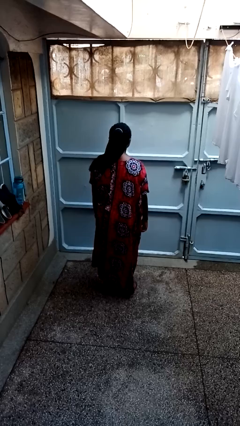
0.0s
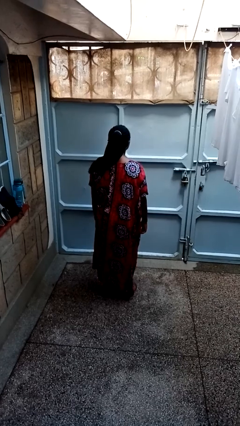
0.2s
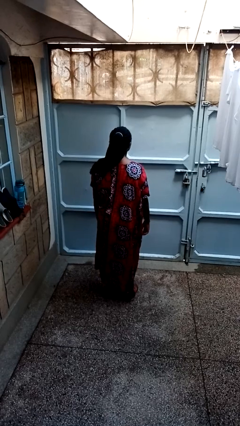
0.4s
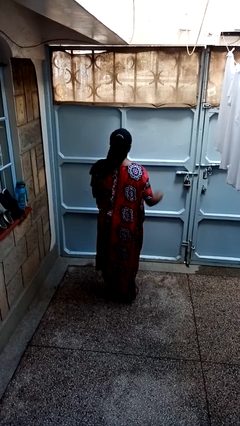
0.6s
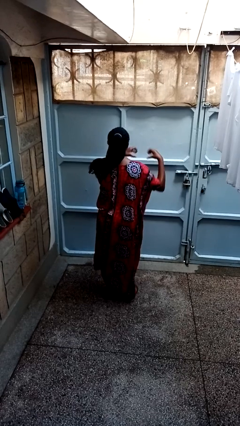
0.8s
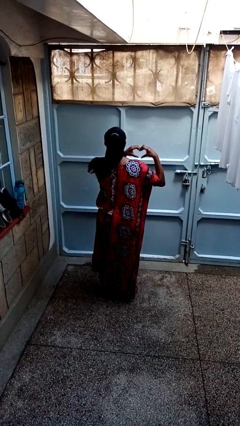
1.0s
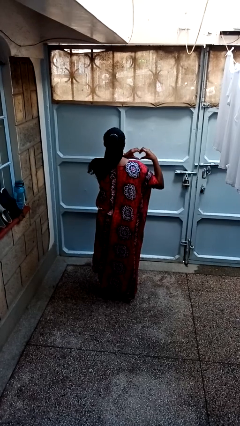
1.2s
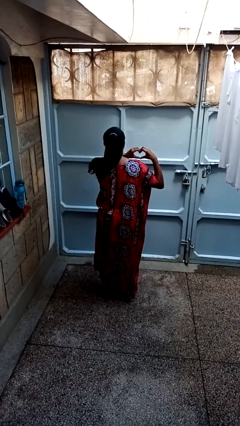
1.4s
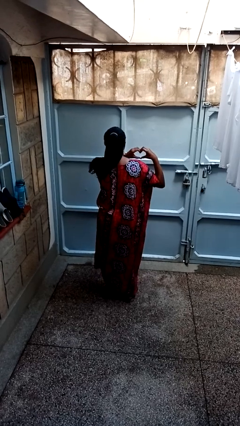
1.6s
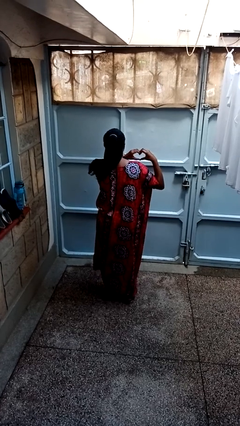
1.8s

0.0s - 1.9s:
person gestures heart

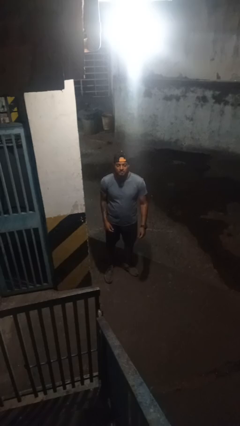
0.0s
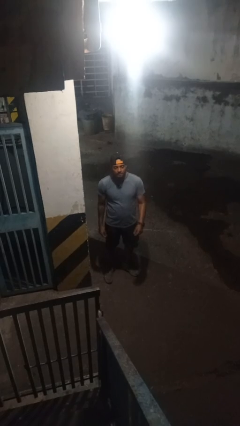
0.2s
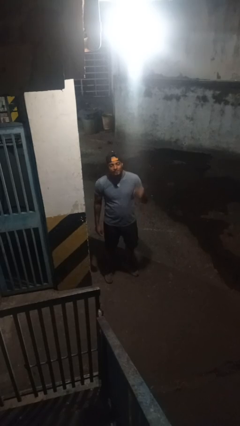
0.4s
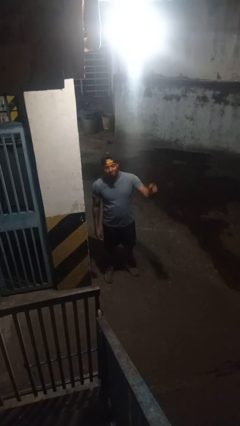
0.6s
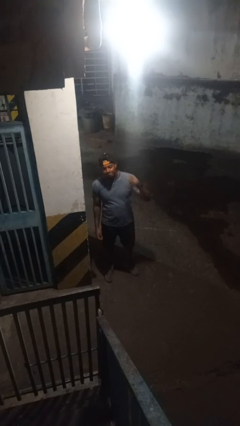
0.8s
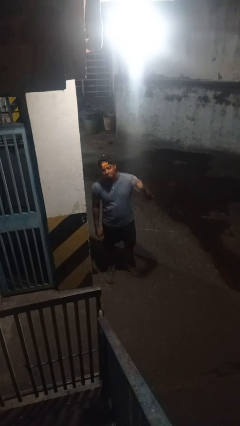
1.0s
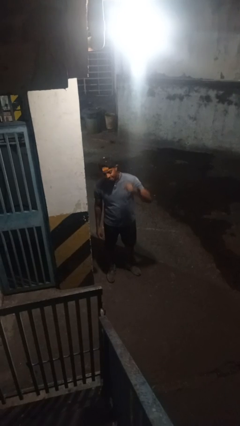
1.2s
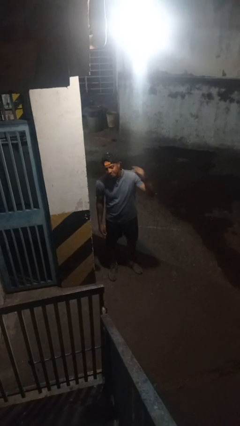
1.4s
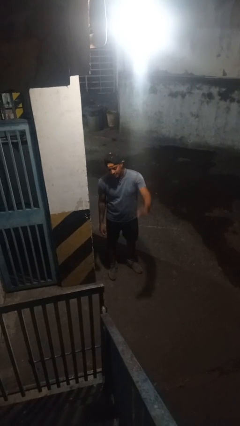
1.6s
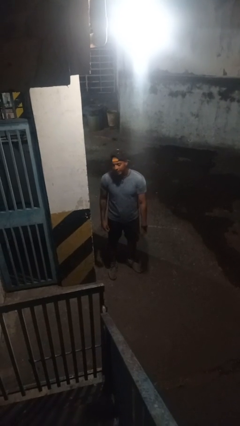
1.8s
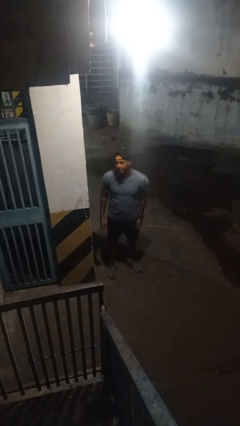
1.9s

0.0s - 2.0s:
person snaps fingers

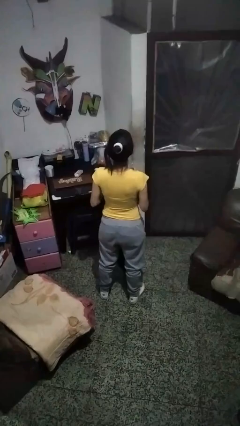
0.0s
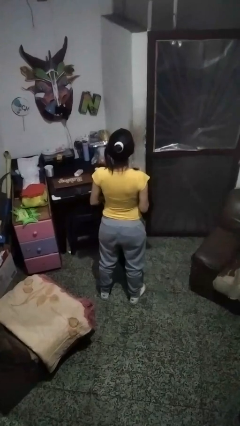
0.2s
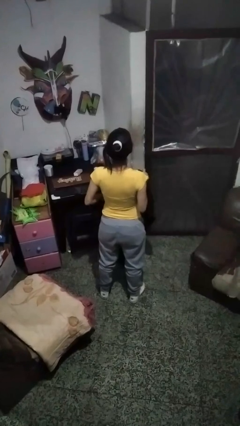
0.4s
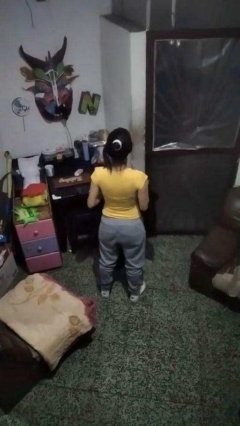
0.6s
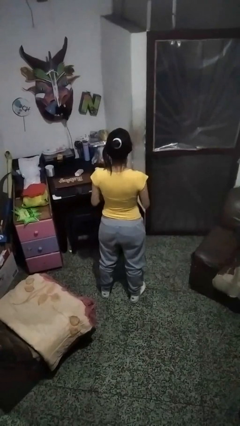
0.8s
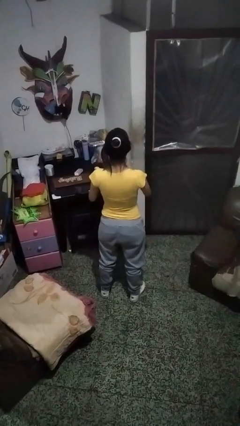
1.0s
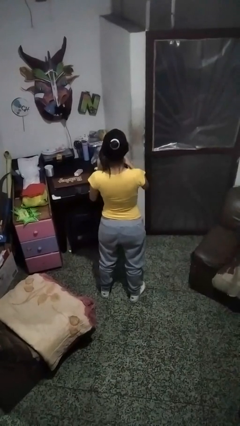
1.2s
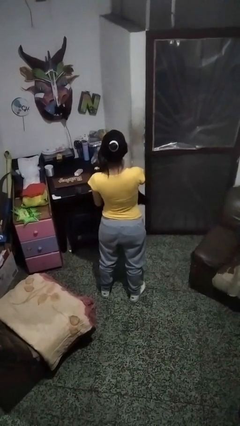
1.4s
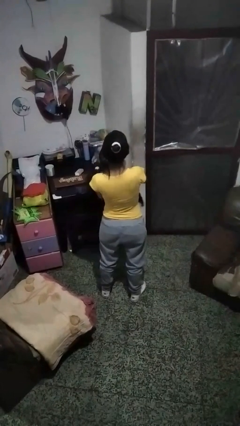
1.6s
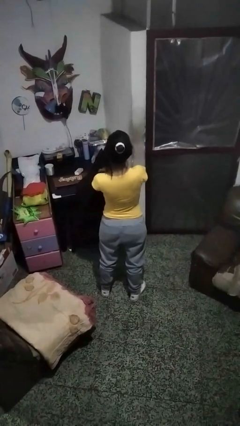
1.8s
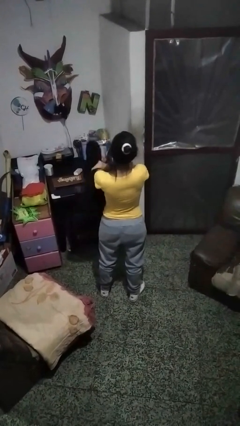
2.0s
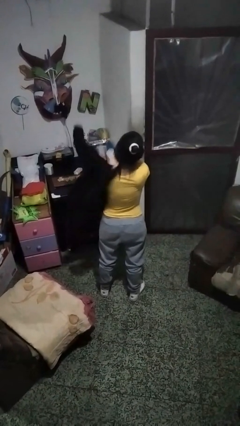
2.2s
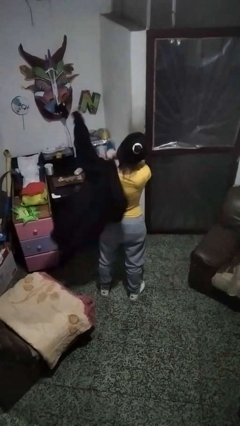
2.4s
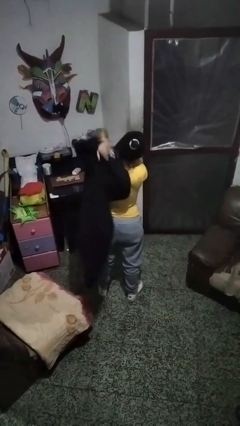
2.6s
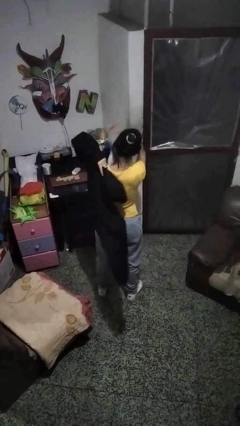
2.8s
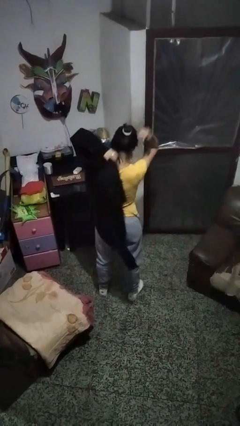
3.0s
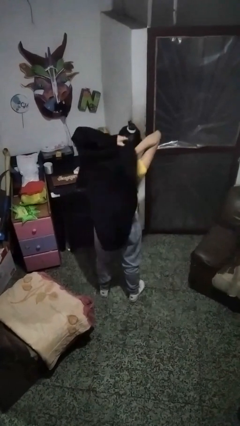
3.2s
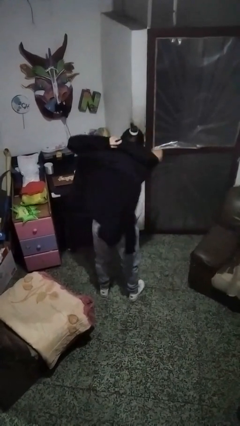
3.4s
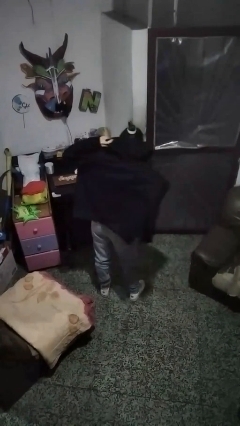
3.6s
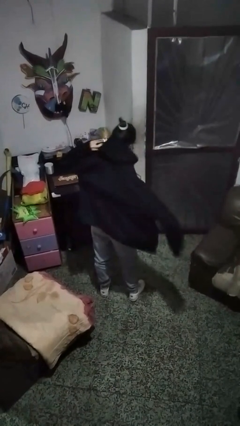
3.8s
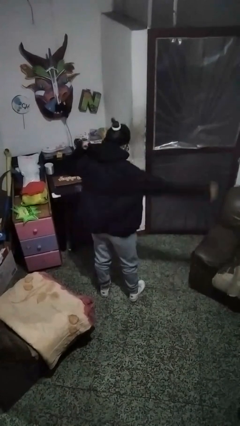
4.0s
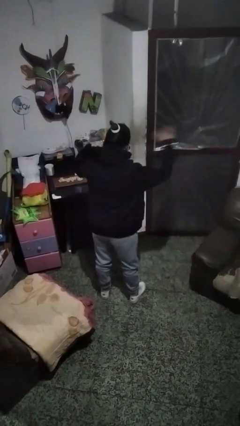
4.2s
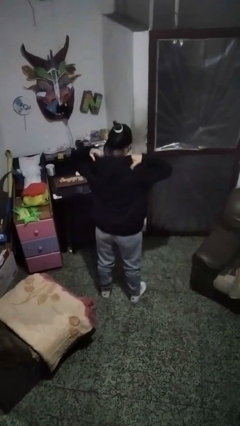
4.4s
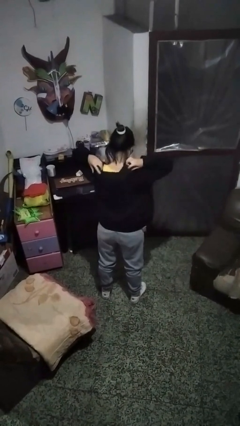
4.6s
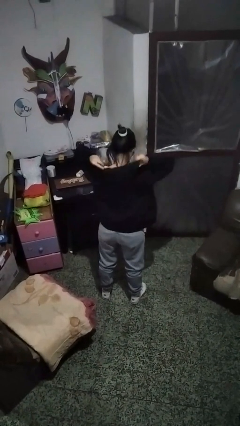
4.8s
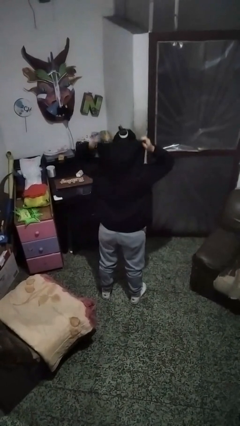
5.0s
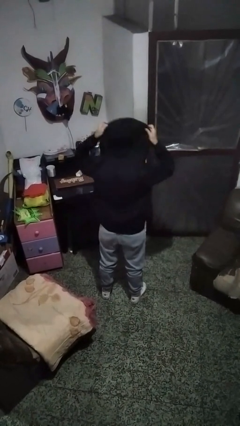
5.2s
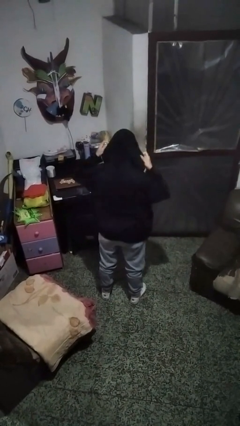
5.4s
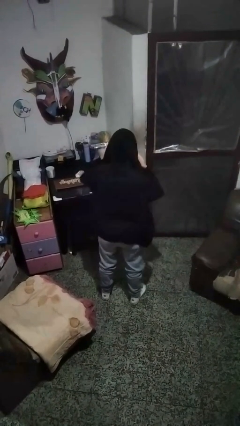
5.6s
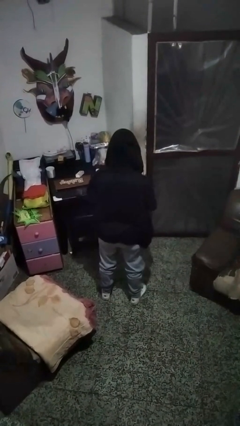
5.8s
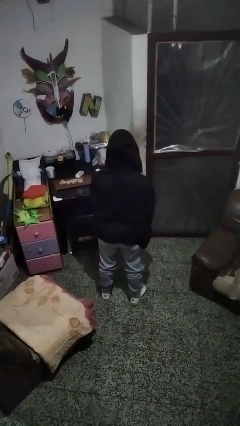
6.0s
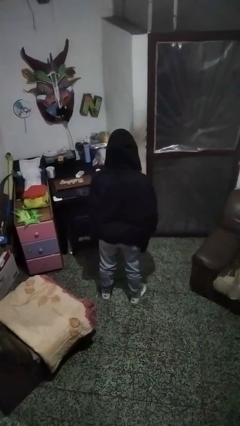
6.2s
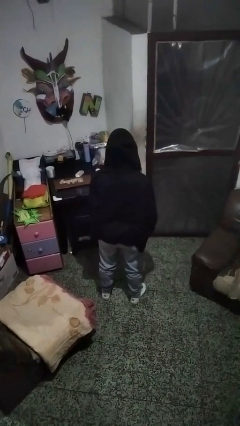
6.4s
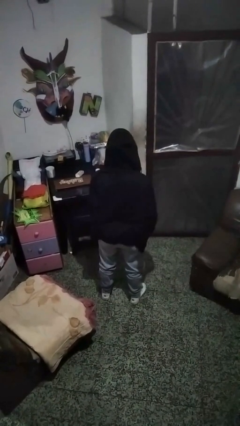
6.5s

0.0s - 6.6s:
person puts on hoodie

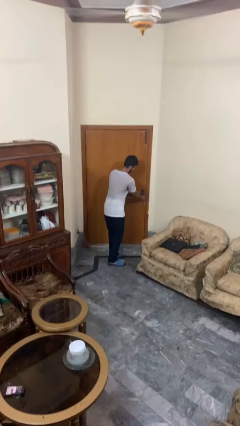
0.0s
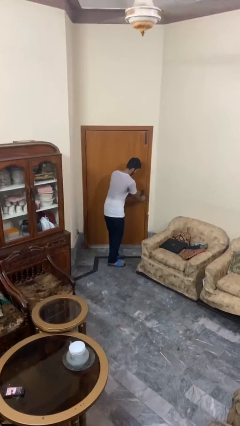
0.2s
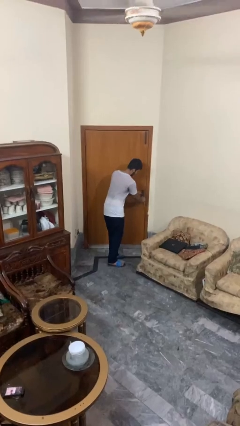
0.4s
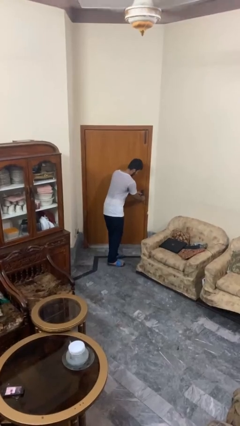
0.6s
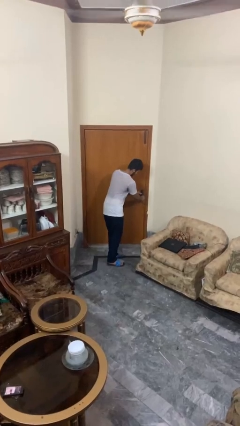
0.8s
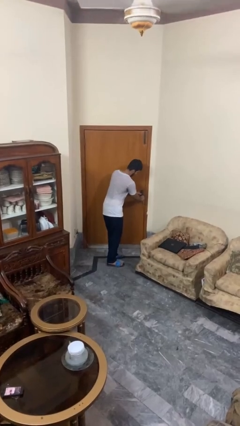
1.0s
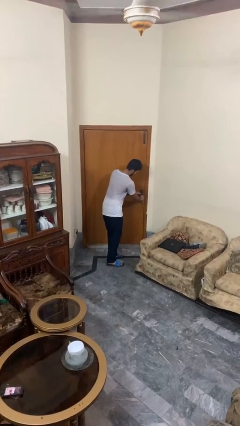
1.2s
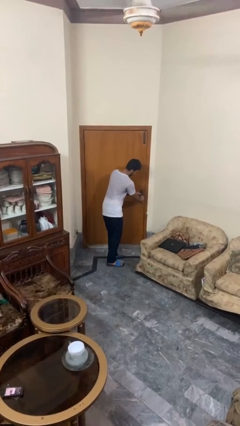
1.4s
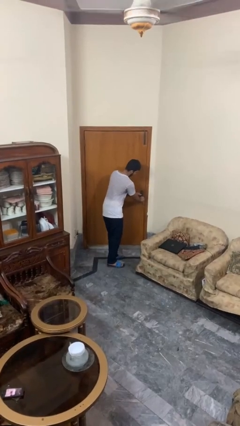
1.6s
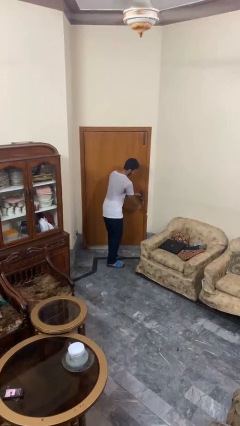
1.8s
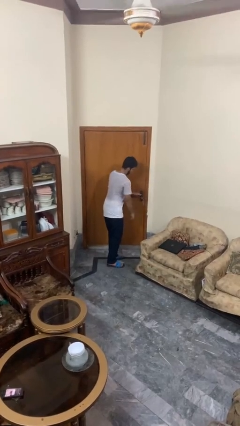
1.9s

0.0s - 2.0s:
person unlocks door with keys

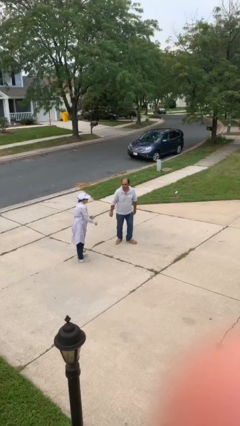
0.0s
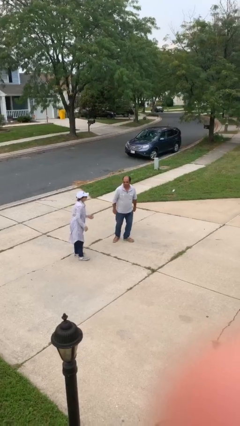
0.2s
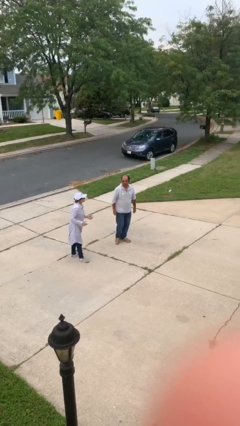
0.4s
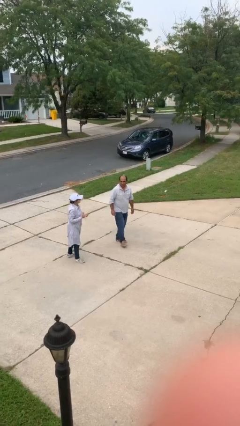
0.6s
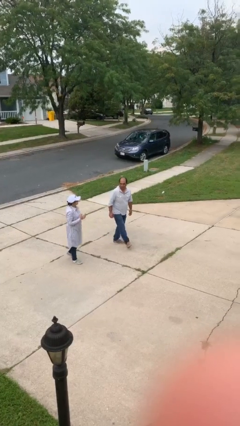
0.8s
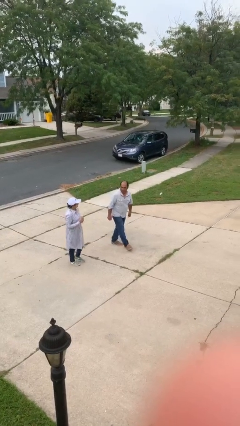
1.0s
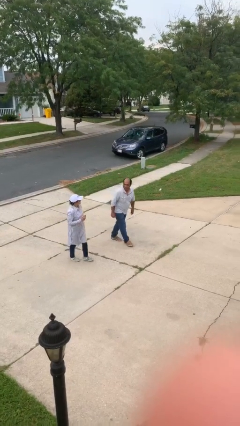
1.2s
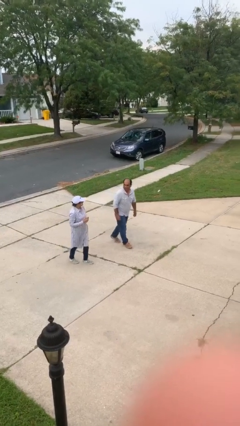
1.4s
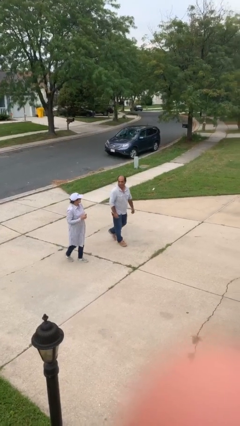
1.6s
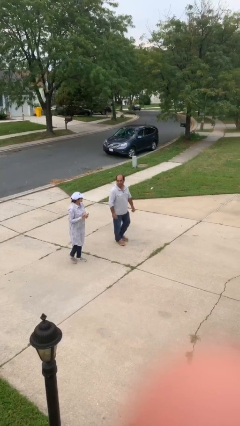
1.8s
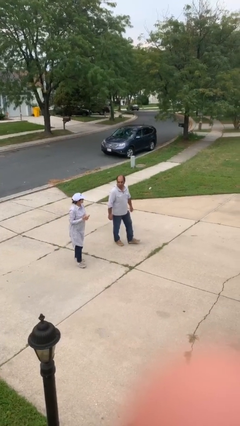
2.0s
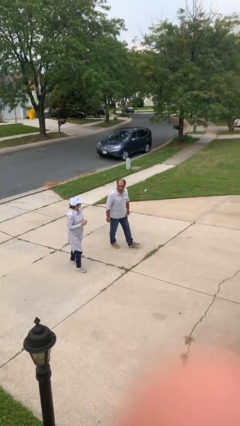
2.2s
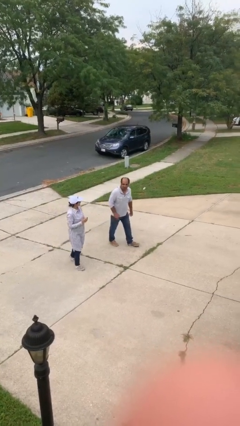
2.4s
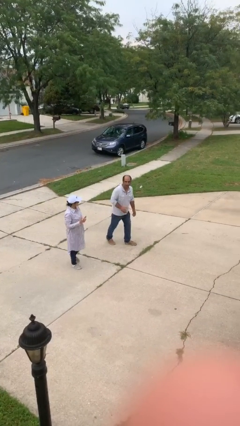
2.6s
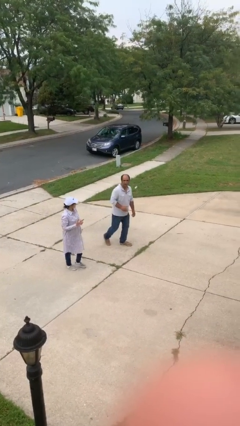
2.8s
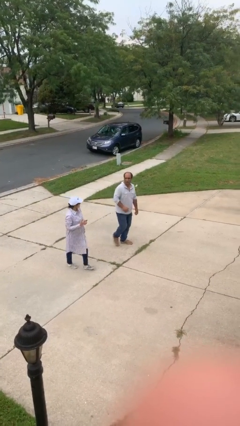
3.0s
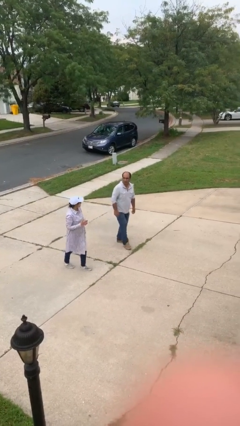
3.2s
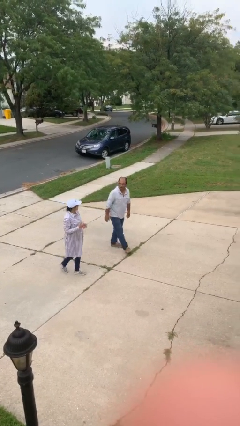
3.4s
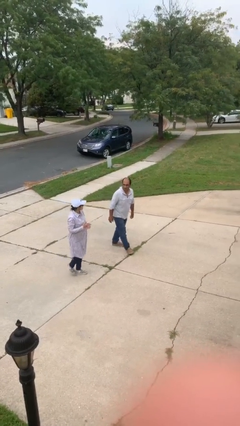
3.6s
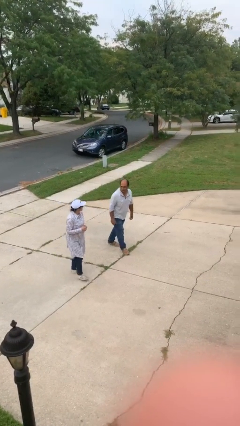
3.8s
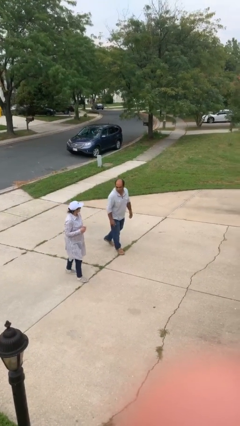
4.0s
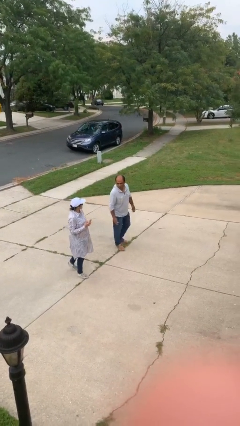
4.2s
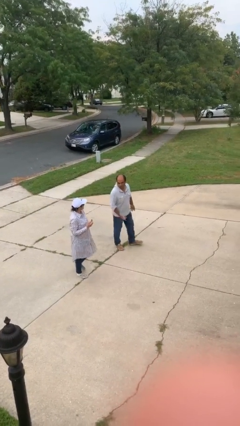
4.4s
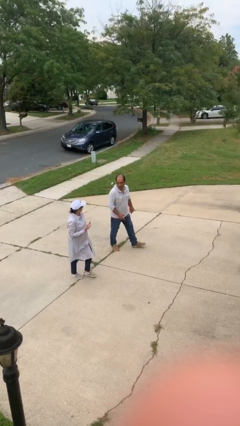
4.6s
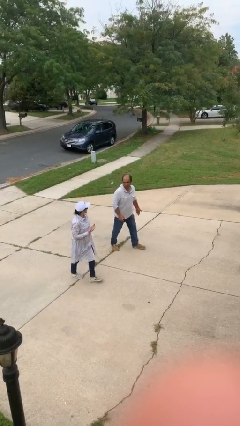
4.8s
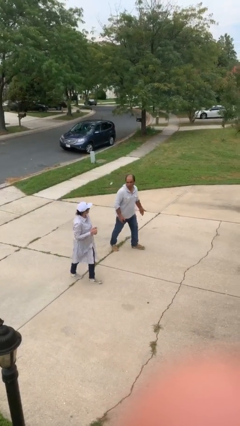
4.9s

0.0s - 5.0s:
person talks to person
